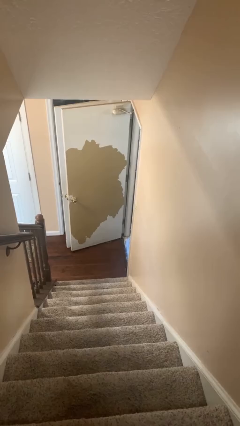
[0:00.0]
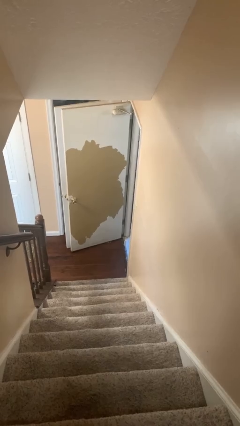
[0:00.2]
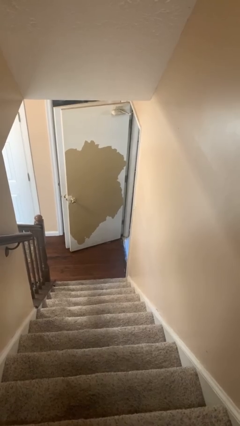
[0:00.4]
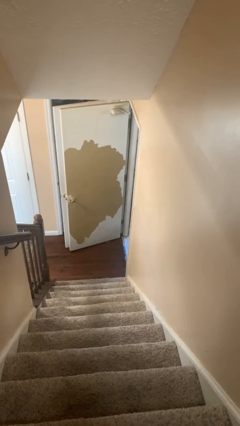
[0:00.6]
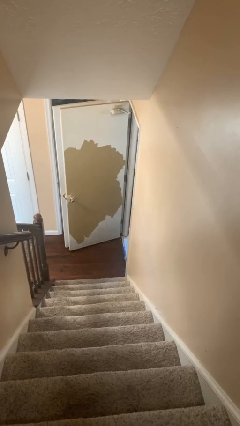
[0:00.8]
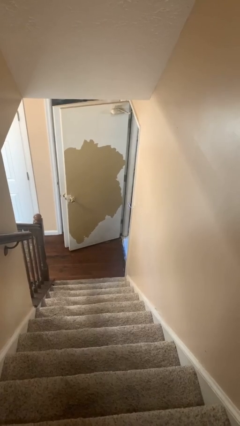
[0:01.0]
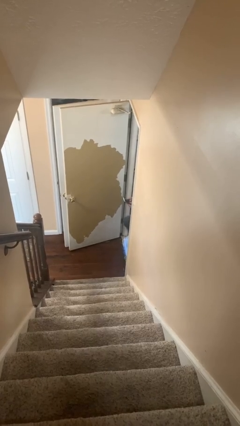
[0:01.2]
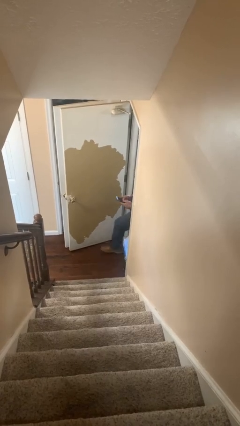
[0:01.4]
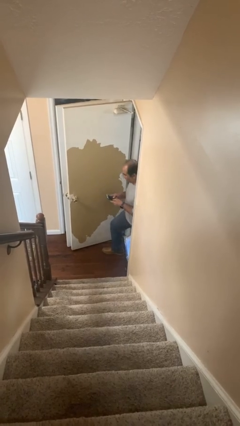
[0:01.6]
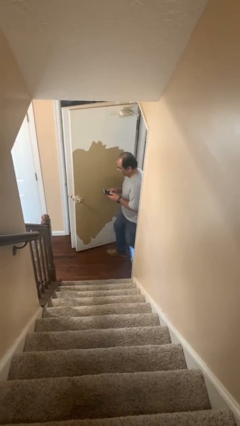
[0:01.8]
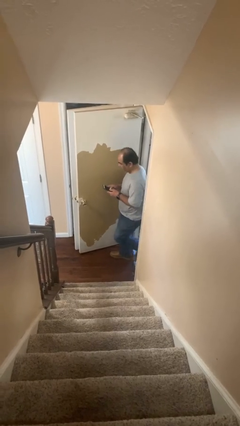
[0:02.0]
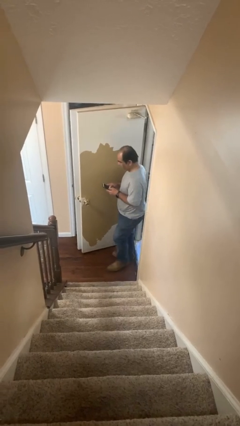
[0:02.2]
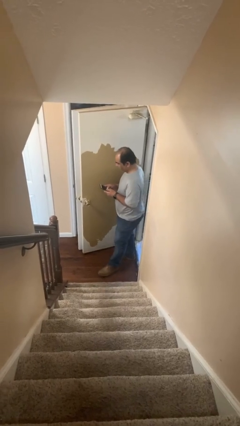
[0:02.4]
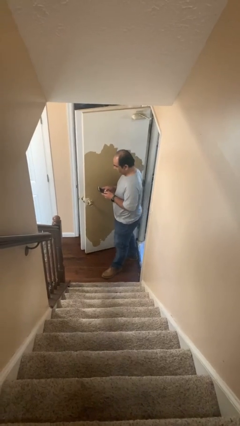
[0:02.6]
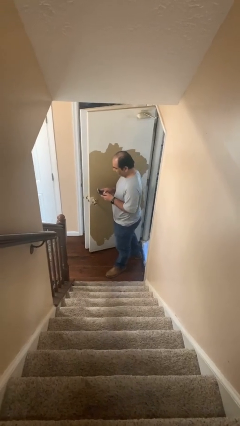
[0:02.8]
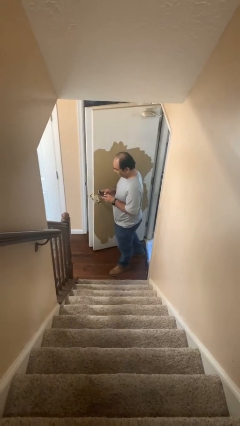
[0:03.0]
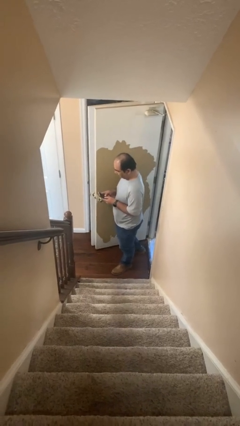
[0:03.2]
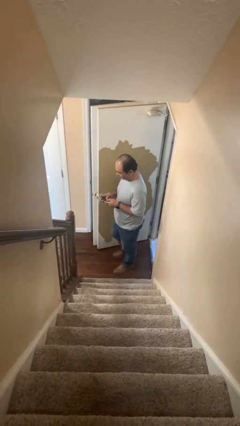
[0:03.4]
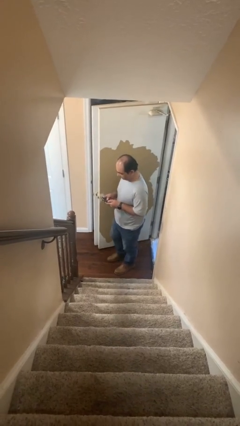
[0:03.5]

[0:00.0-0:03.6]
person enters scene through structure

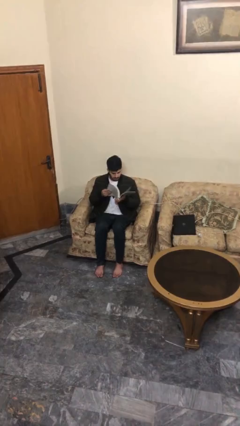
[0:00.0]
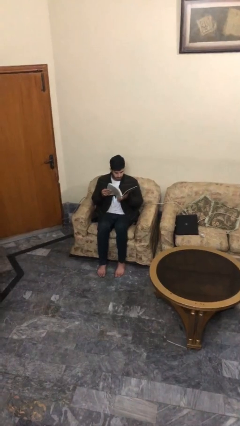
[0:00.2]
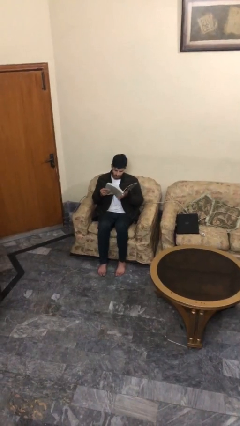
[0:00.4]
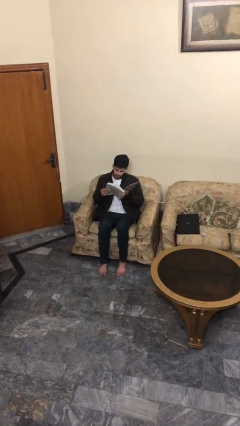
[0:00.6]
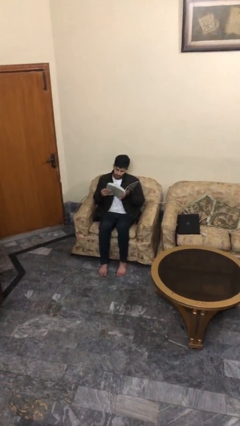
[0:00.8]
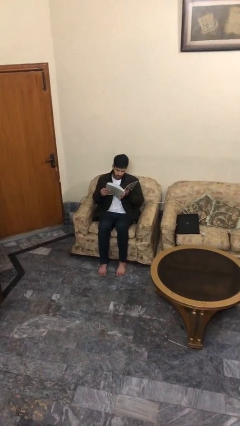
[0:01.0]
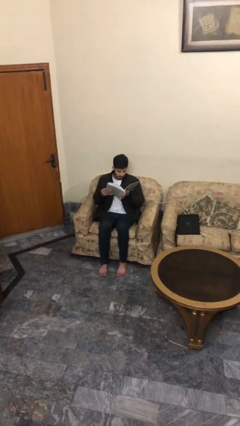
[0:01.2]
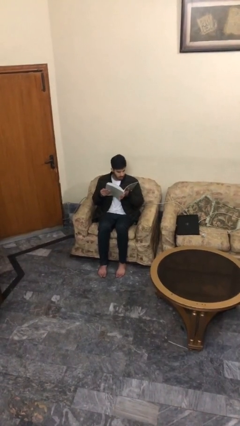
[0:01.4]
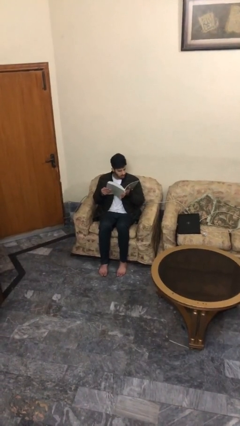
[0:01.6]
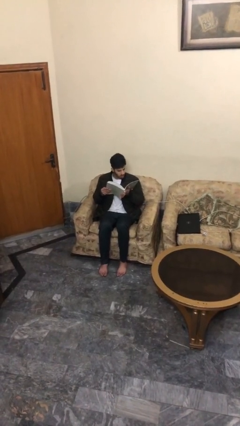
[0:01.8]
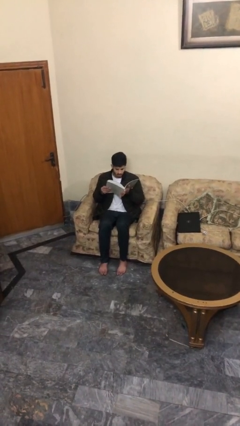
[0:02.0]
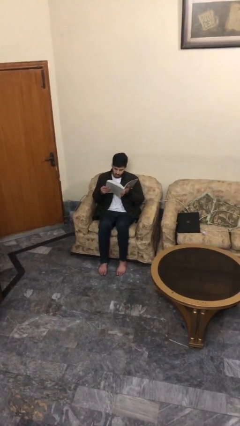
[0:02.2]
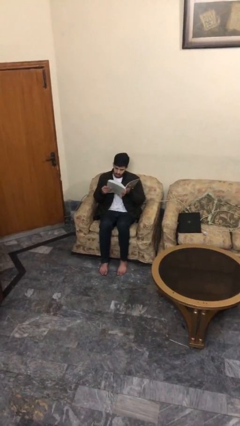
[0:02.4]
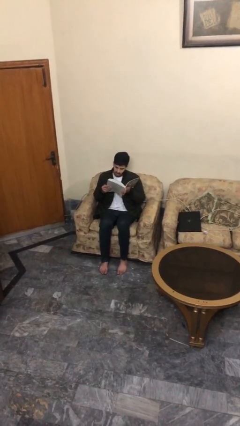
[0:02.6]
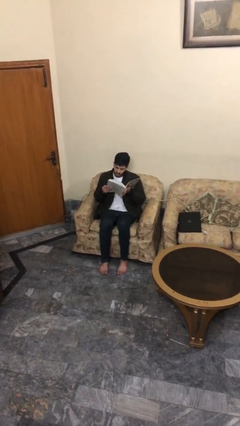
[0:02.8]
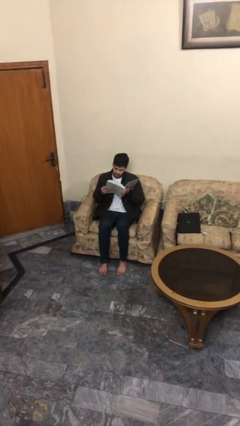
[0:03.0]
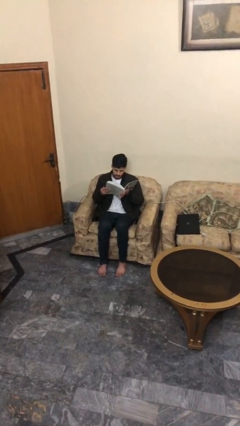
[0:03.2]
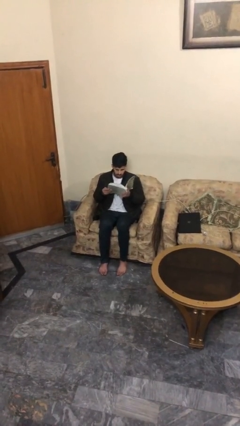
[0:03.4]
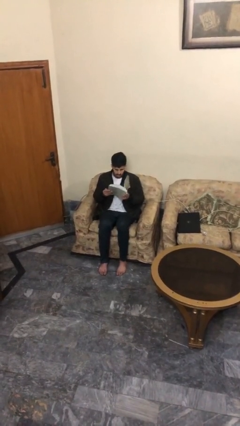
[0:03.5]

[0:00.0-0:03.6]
person reads document

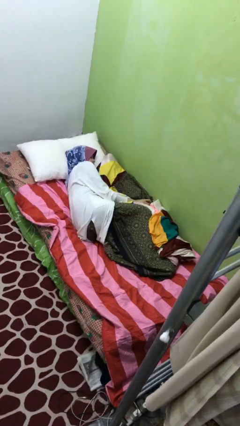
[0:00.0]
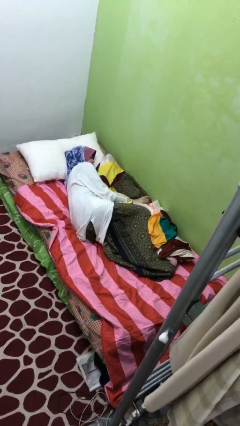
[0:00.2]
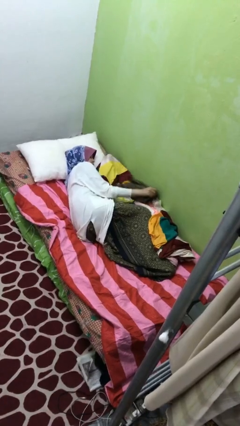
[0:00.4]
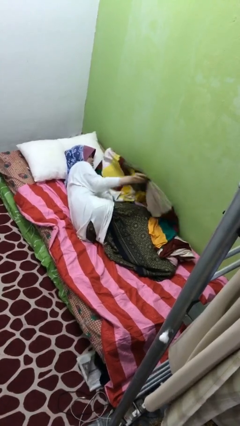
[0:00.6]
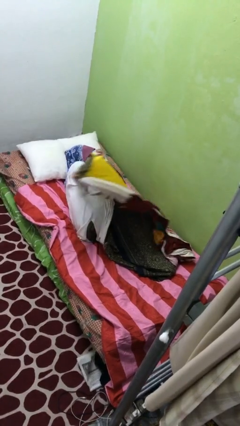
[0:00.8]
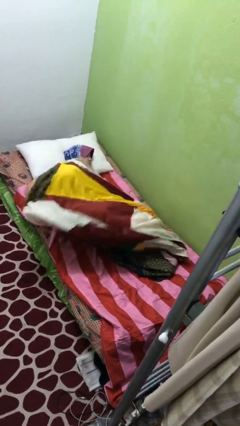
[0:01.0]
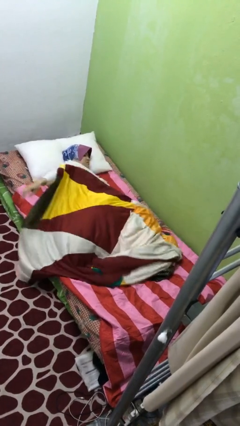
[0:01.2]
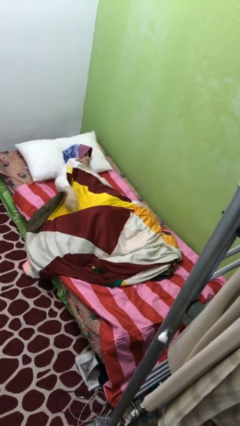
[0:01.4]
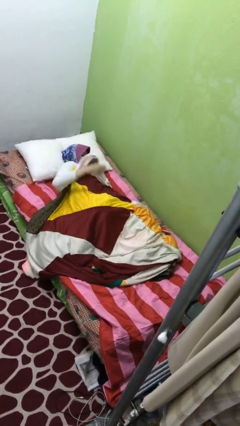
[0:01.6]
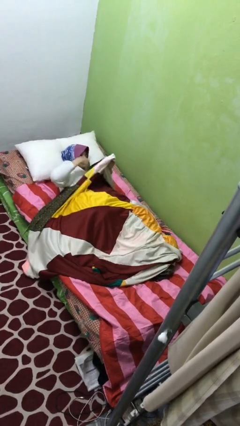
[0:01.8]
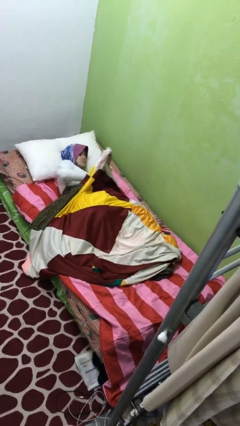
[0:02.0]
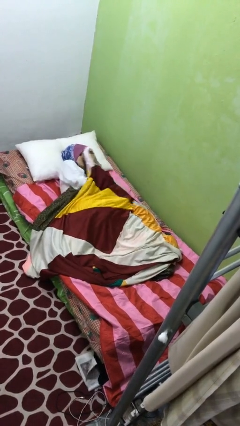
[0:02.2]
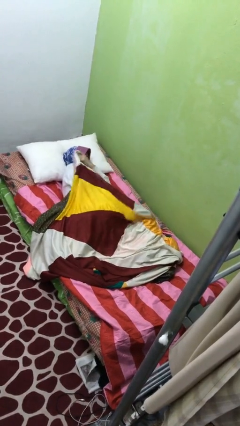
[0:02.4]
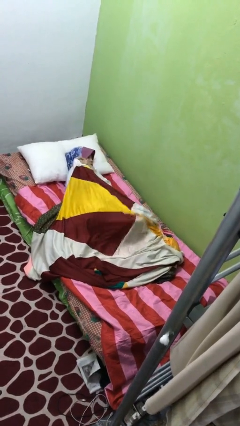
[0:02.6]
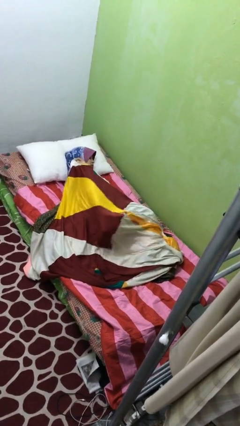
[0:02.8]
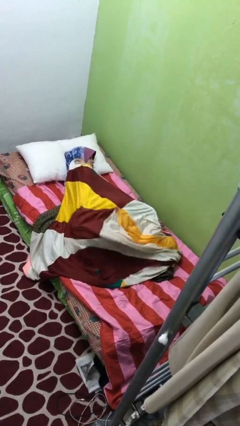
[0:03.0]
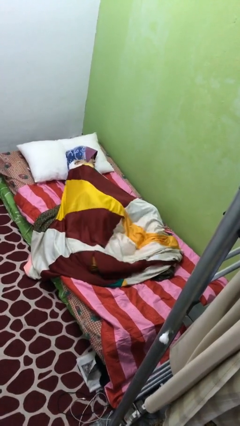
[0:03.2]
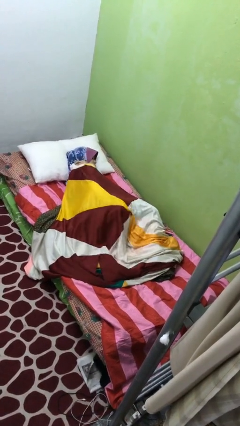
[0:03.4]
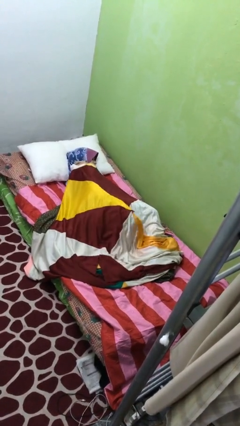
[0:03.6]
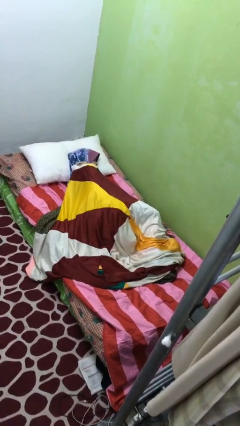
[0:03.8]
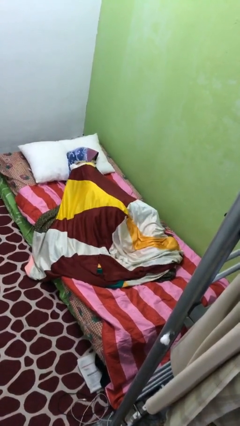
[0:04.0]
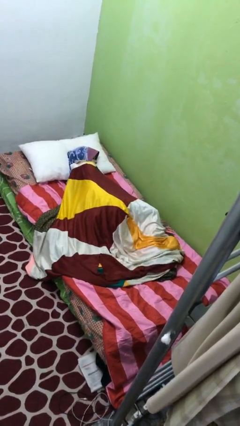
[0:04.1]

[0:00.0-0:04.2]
person covers with blanket

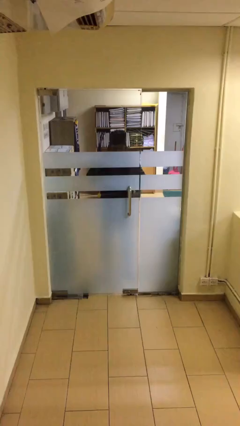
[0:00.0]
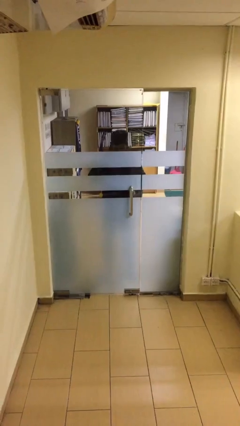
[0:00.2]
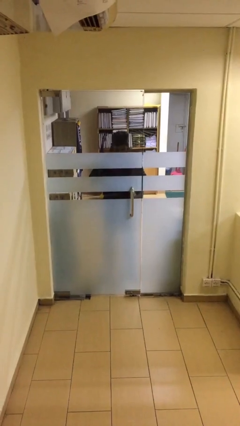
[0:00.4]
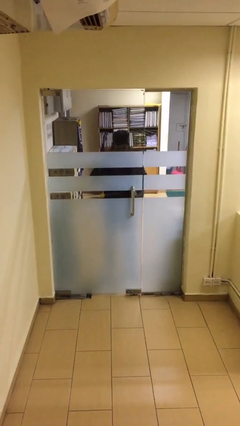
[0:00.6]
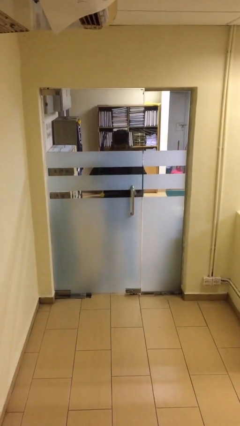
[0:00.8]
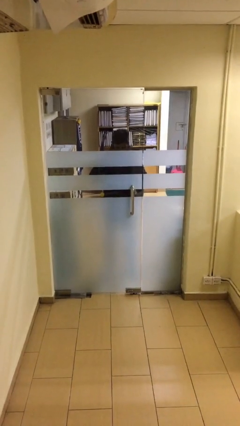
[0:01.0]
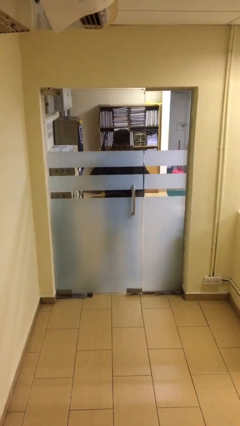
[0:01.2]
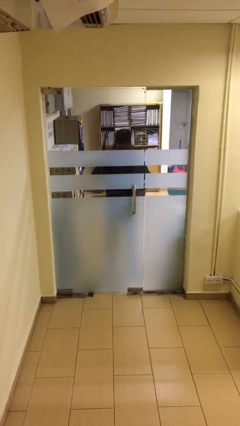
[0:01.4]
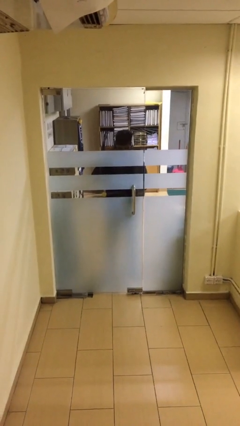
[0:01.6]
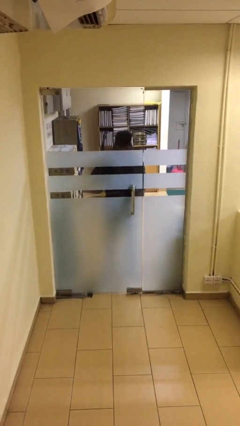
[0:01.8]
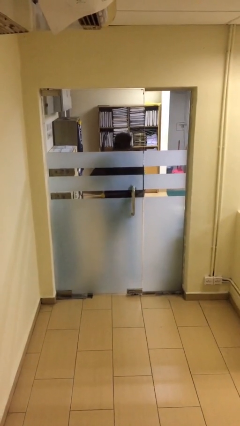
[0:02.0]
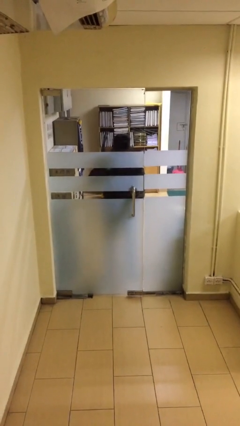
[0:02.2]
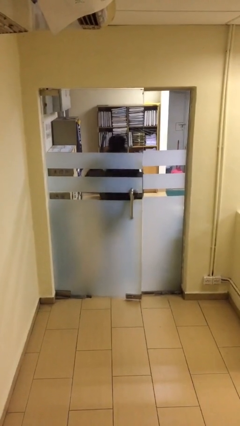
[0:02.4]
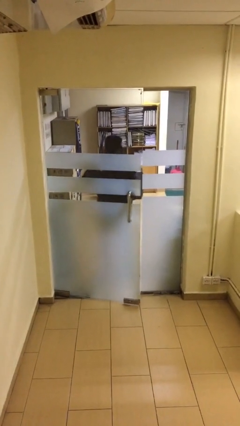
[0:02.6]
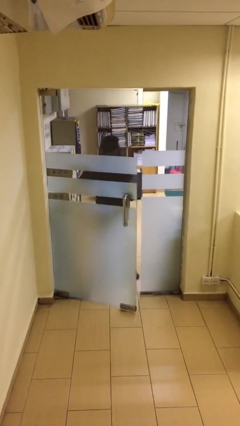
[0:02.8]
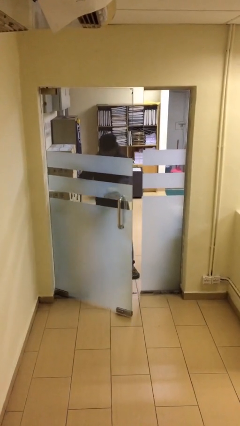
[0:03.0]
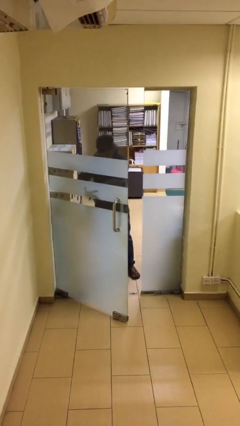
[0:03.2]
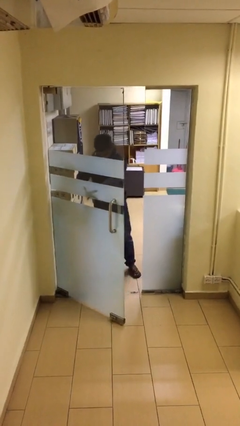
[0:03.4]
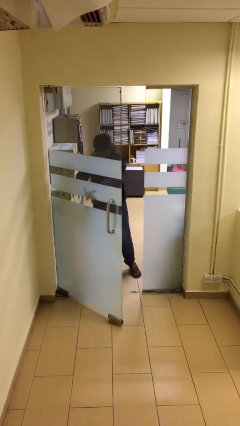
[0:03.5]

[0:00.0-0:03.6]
person opens facility door

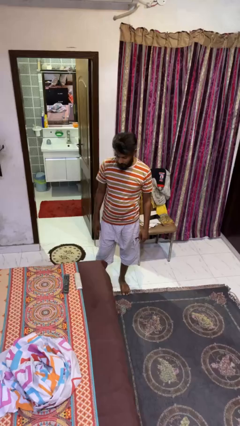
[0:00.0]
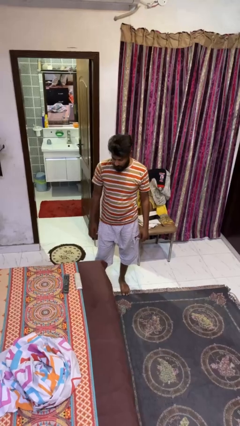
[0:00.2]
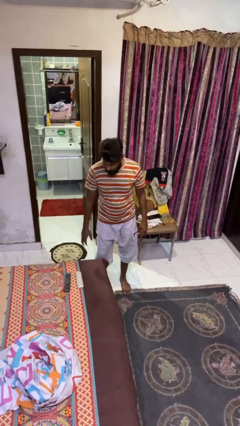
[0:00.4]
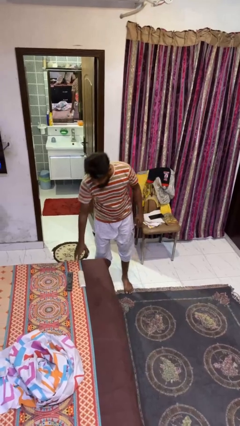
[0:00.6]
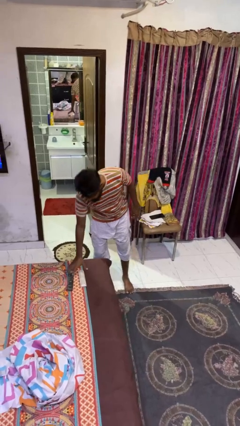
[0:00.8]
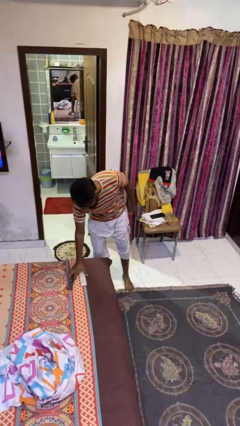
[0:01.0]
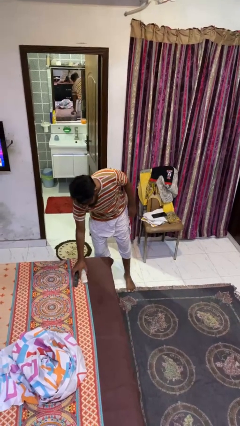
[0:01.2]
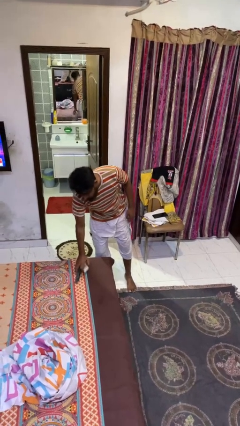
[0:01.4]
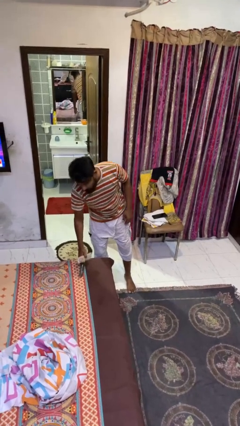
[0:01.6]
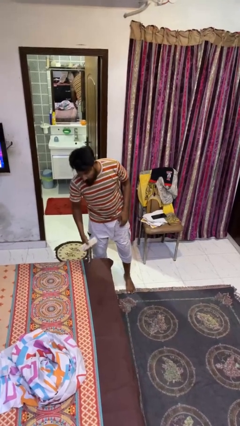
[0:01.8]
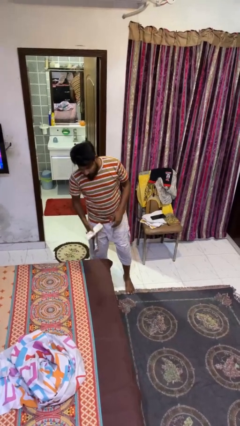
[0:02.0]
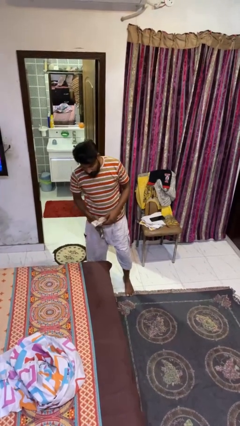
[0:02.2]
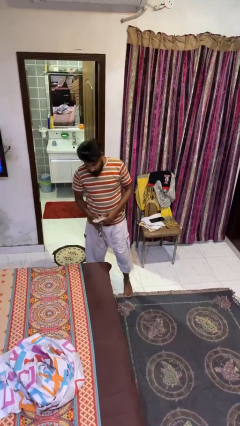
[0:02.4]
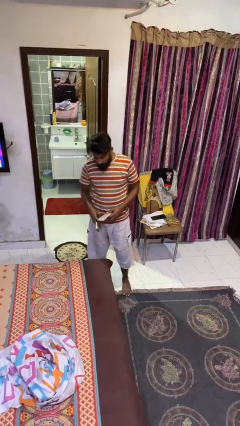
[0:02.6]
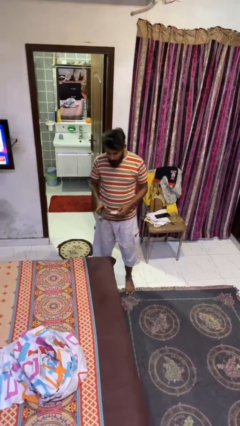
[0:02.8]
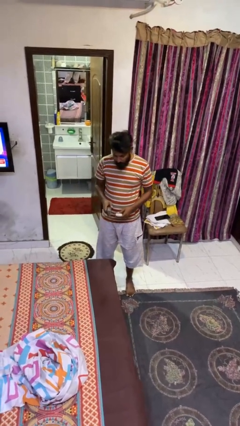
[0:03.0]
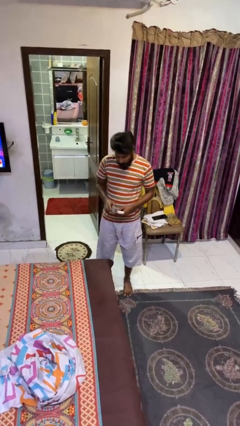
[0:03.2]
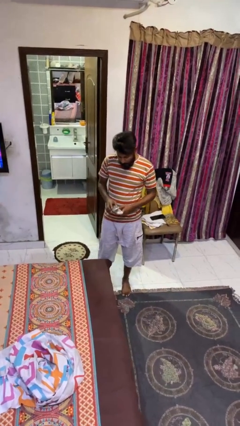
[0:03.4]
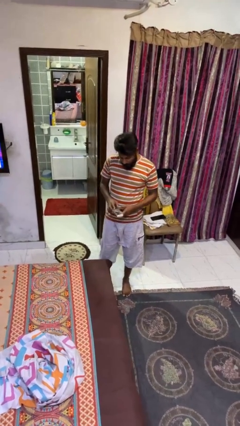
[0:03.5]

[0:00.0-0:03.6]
person picks up object from bed
